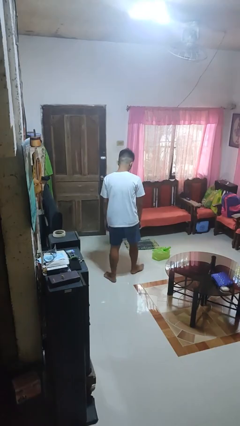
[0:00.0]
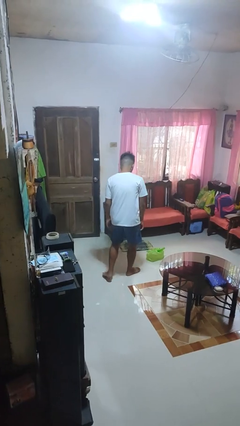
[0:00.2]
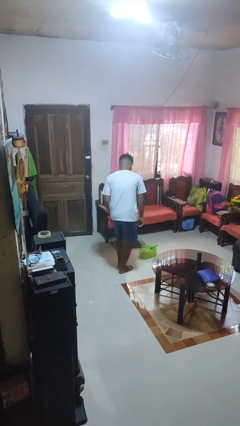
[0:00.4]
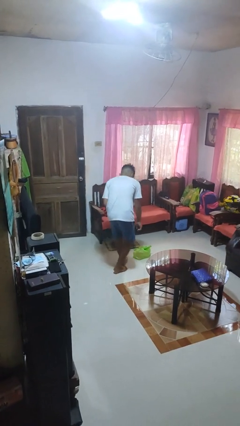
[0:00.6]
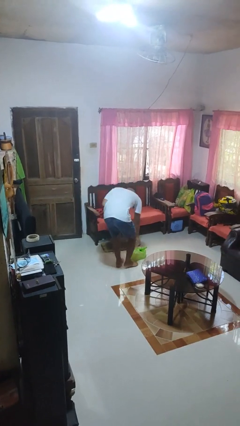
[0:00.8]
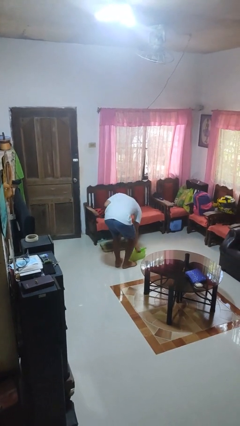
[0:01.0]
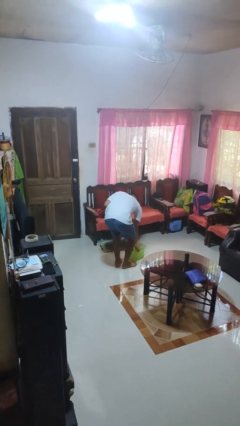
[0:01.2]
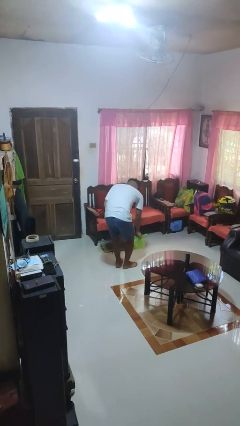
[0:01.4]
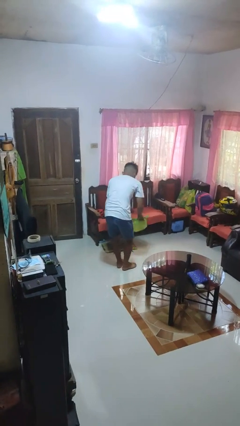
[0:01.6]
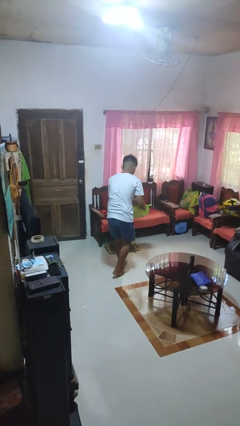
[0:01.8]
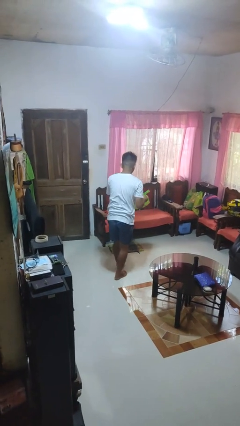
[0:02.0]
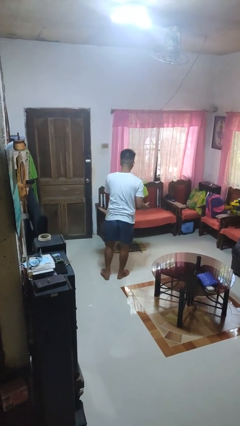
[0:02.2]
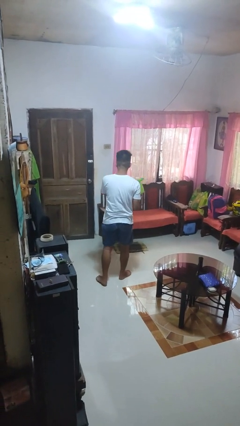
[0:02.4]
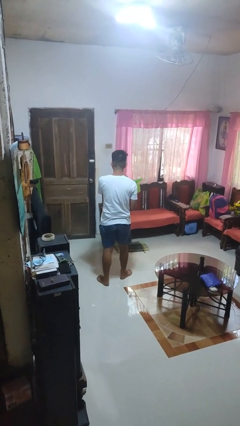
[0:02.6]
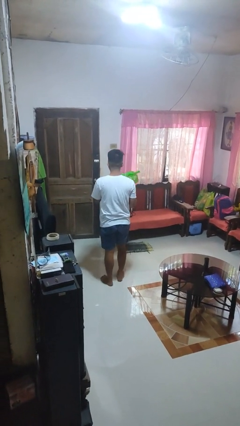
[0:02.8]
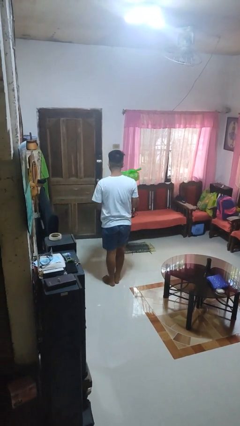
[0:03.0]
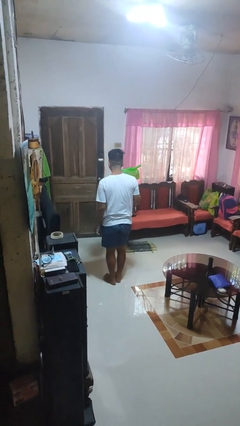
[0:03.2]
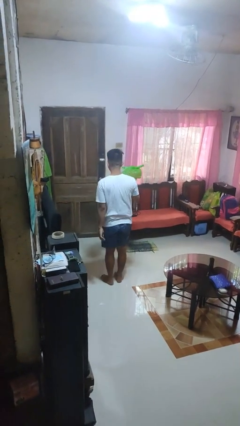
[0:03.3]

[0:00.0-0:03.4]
person picks up object from floor

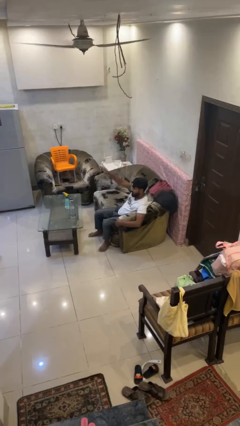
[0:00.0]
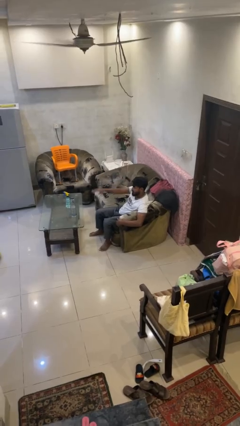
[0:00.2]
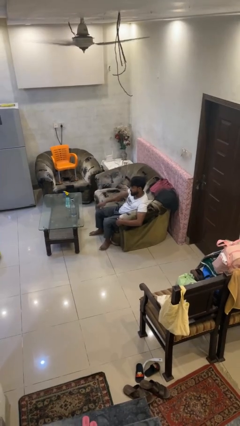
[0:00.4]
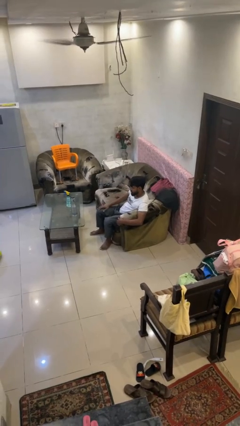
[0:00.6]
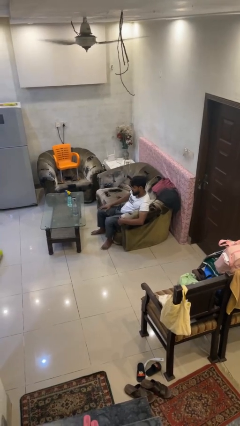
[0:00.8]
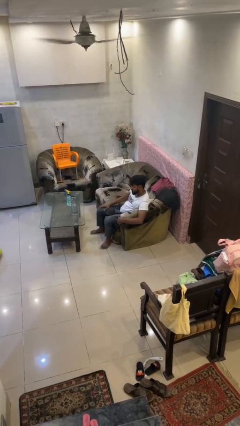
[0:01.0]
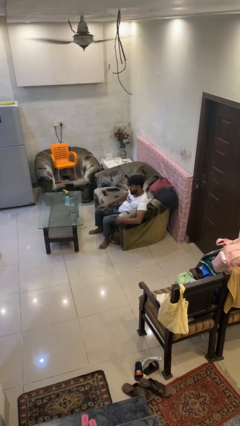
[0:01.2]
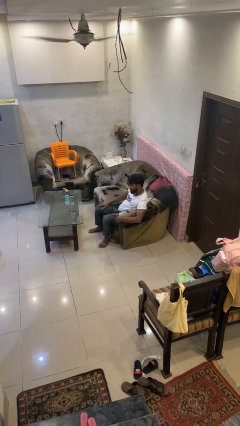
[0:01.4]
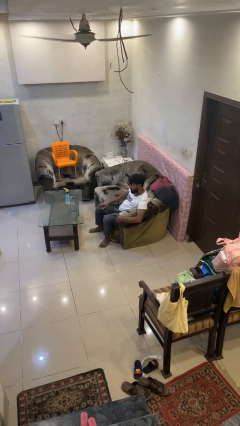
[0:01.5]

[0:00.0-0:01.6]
person gestures lower hand

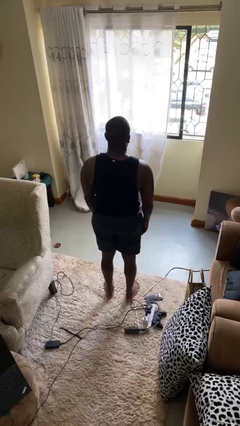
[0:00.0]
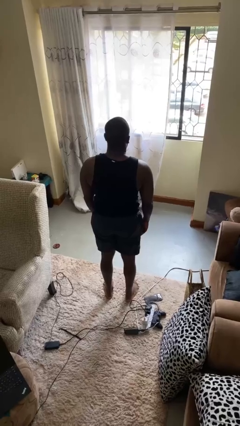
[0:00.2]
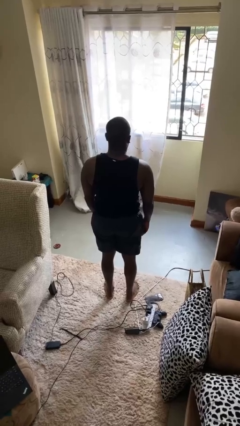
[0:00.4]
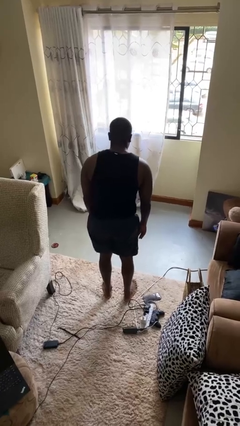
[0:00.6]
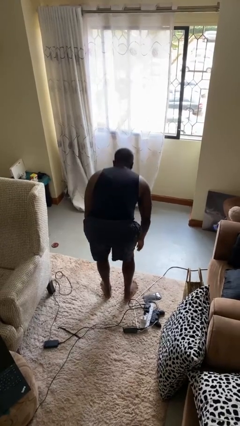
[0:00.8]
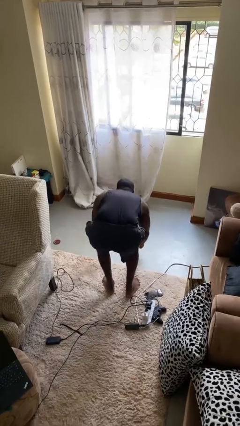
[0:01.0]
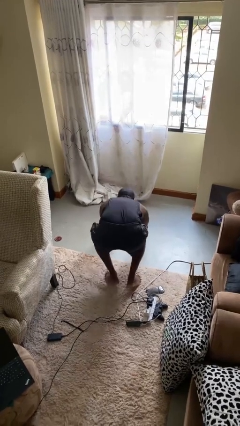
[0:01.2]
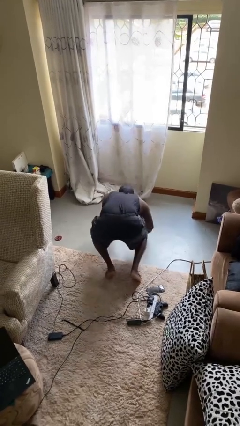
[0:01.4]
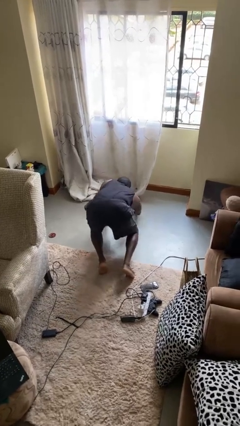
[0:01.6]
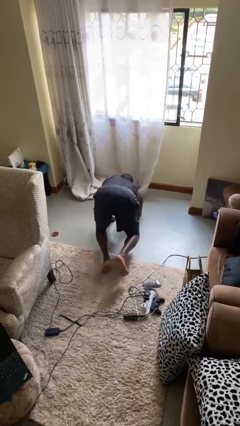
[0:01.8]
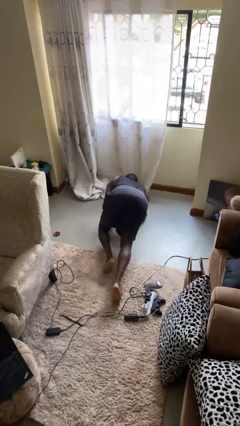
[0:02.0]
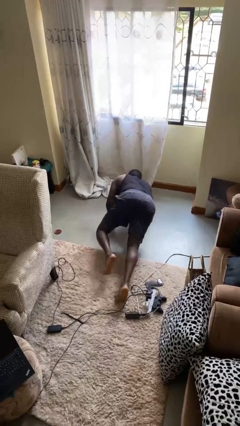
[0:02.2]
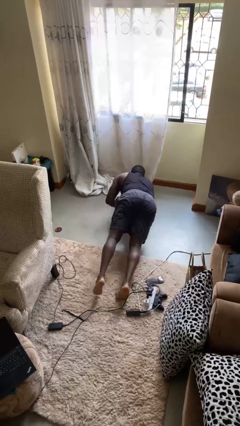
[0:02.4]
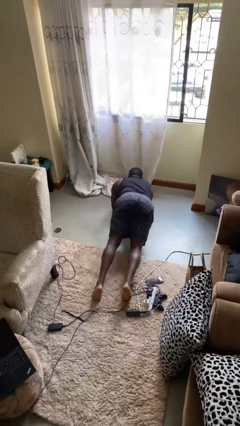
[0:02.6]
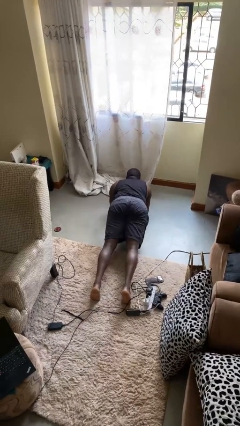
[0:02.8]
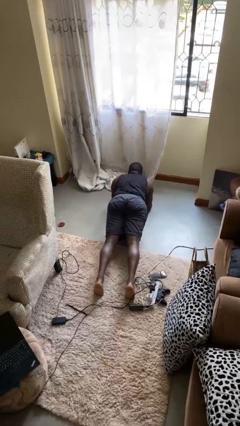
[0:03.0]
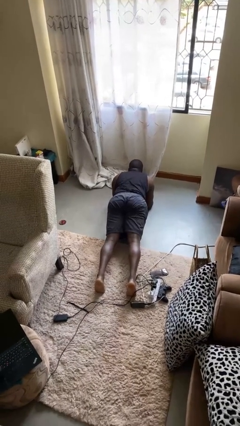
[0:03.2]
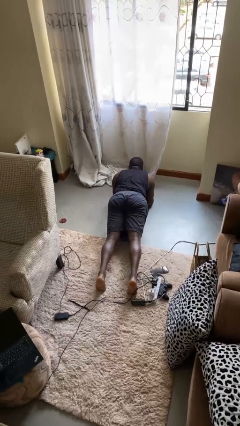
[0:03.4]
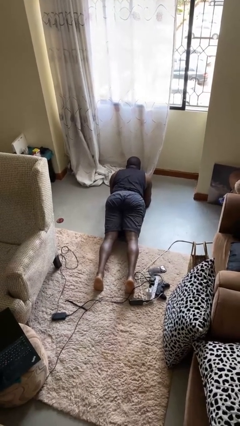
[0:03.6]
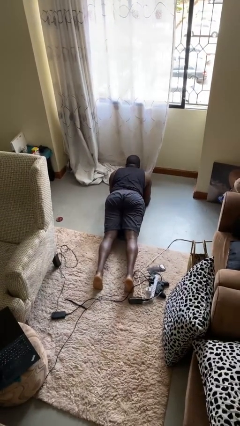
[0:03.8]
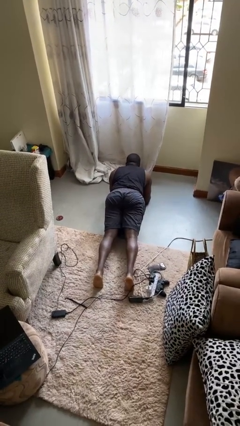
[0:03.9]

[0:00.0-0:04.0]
person exercises with plank

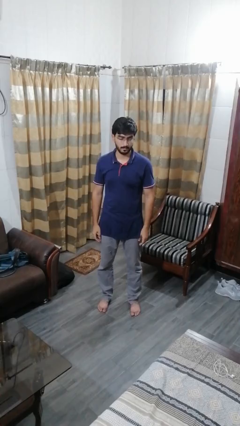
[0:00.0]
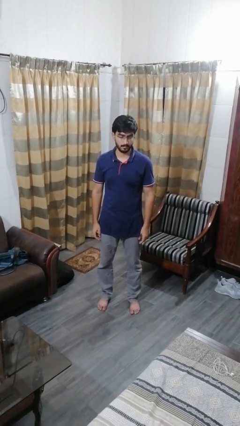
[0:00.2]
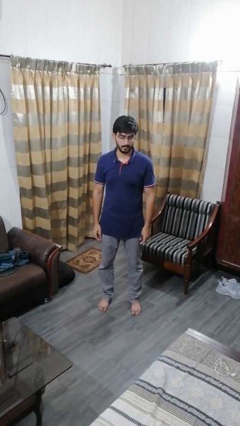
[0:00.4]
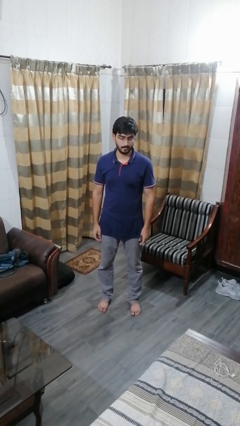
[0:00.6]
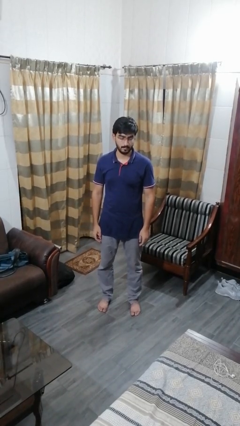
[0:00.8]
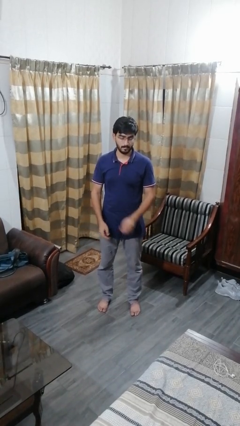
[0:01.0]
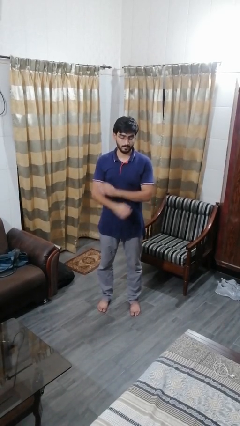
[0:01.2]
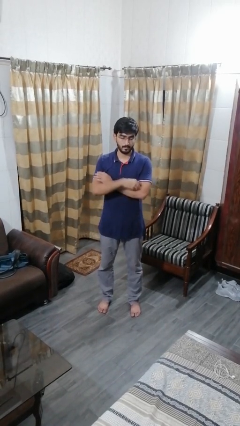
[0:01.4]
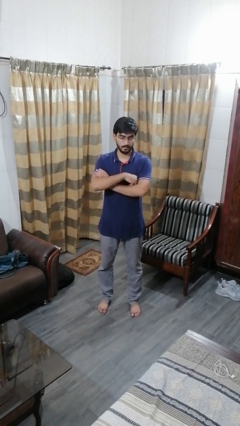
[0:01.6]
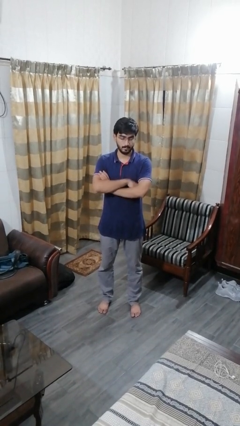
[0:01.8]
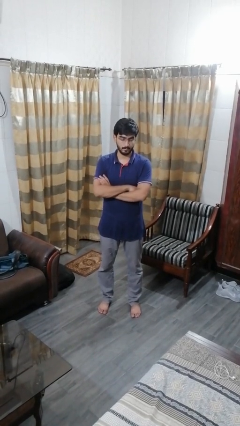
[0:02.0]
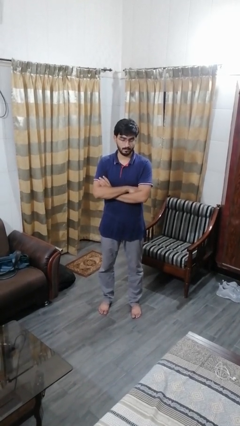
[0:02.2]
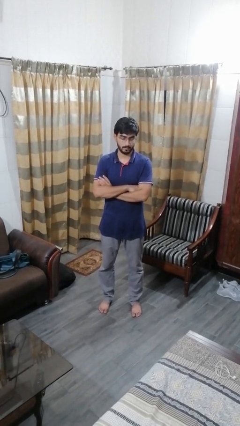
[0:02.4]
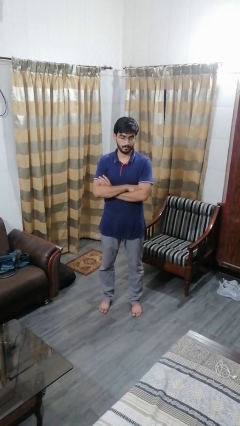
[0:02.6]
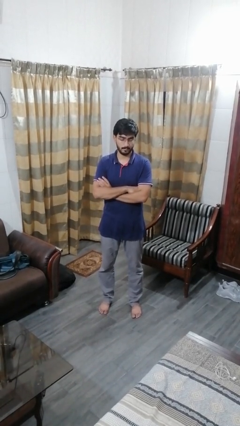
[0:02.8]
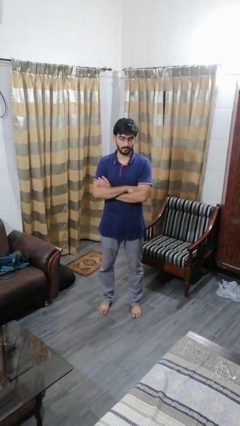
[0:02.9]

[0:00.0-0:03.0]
person crosses arms

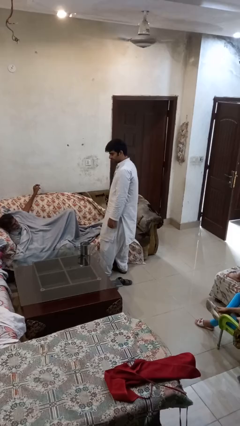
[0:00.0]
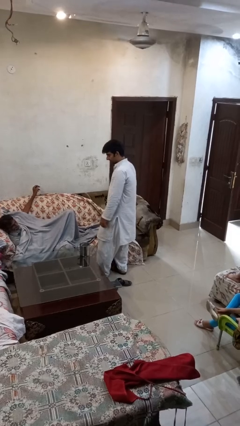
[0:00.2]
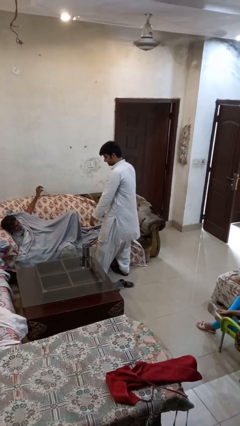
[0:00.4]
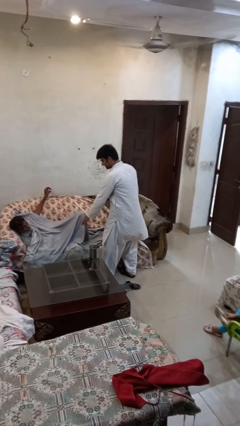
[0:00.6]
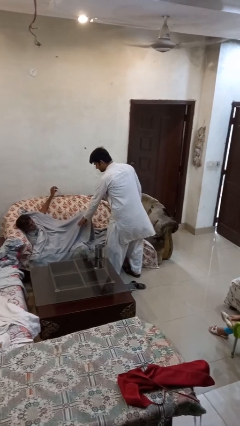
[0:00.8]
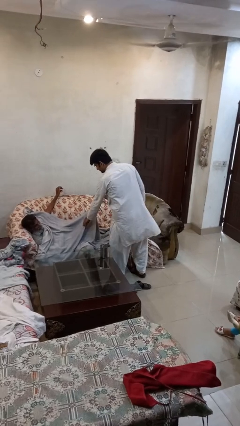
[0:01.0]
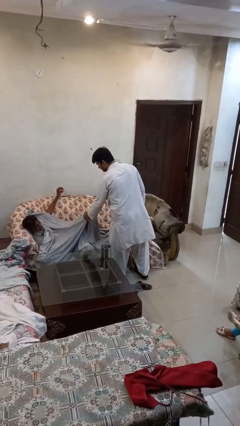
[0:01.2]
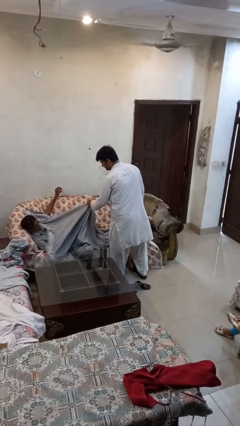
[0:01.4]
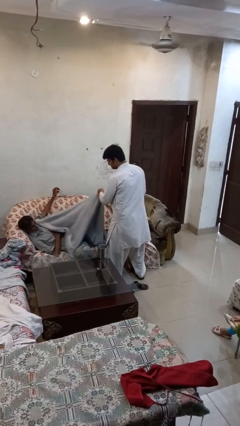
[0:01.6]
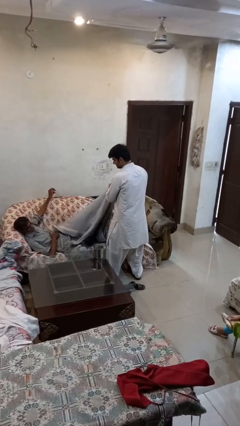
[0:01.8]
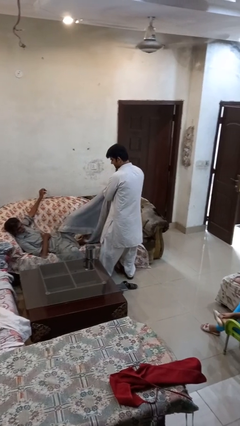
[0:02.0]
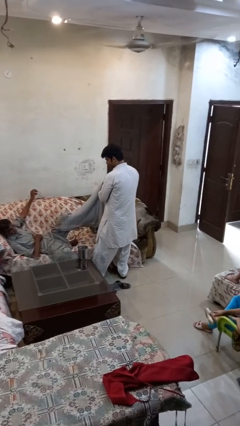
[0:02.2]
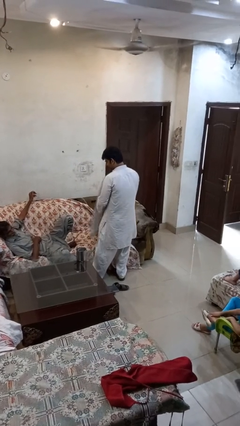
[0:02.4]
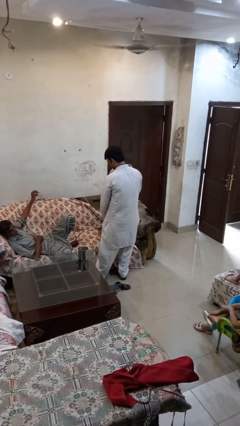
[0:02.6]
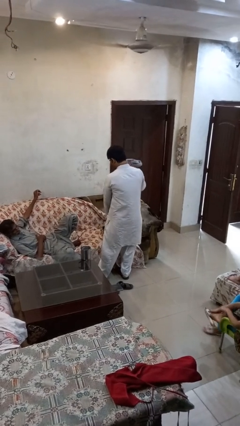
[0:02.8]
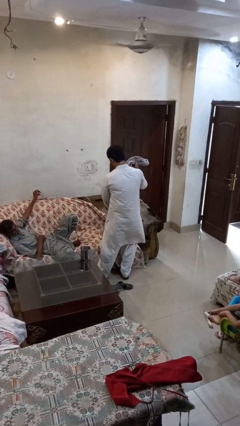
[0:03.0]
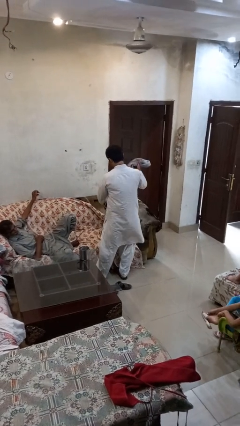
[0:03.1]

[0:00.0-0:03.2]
person uncovers friend with blanket

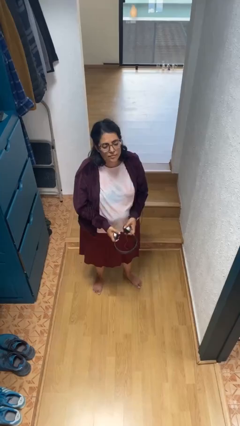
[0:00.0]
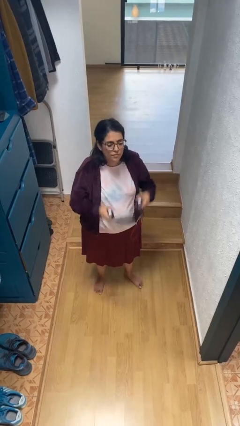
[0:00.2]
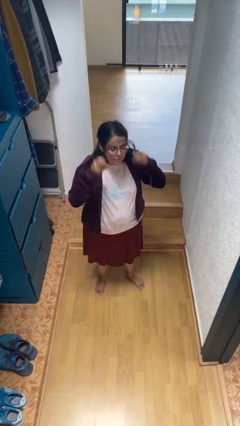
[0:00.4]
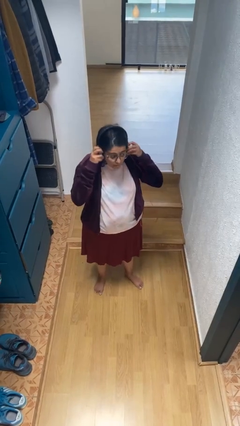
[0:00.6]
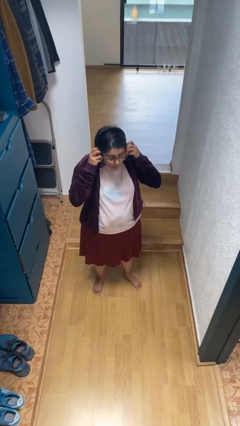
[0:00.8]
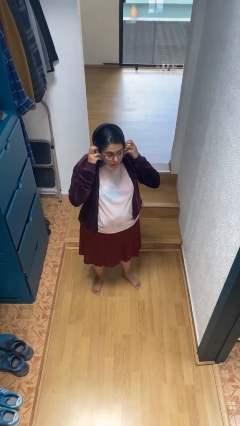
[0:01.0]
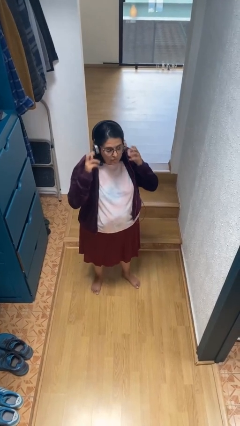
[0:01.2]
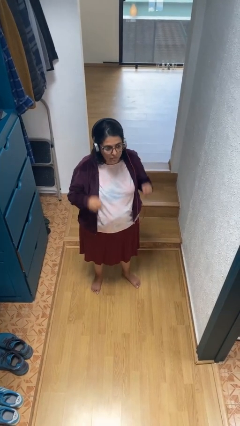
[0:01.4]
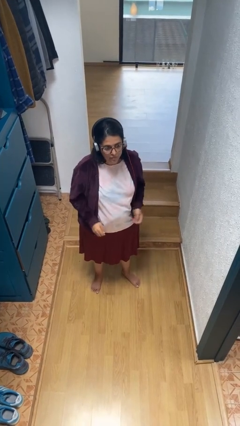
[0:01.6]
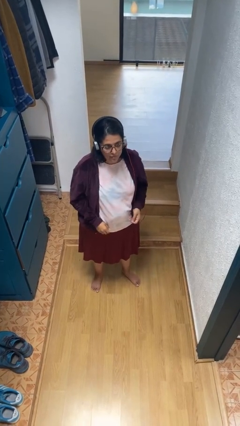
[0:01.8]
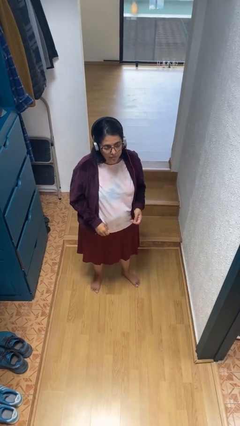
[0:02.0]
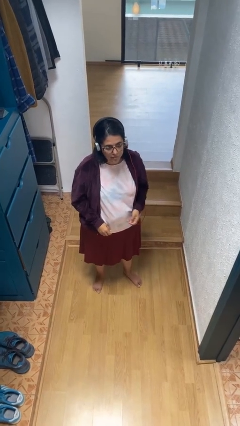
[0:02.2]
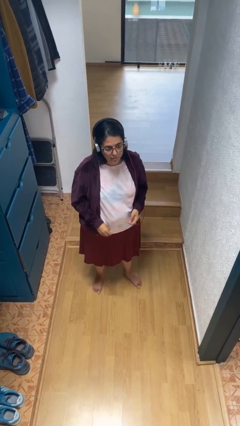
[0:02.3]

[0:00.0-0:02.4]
person puts on headphones
